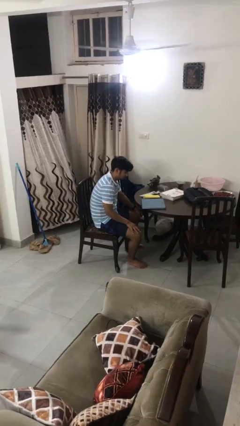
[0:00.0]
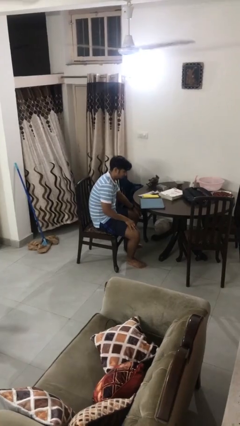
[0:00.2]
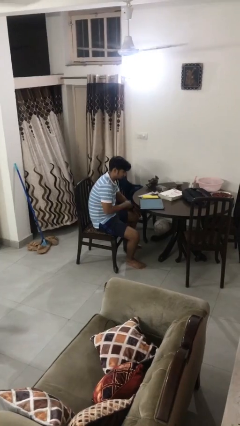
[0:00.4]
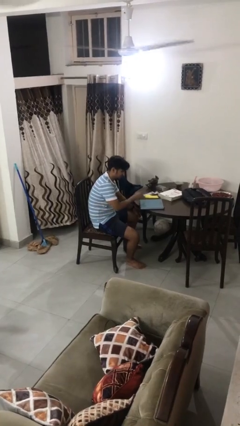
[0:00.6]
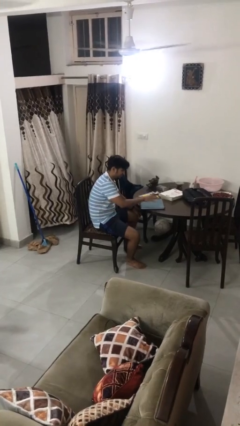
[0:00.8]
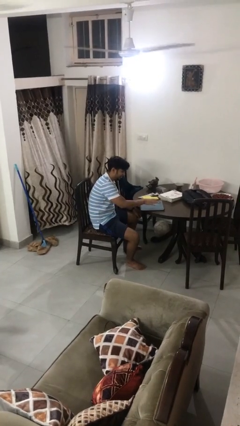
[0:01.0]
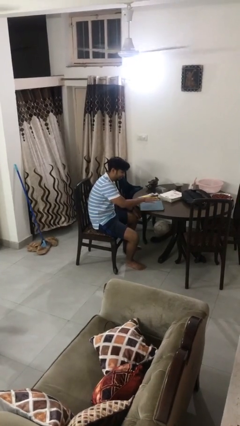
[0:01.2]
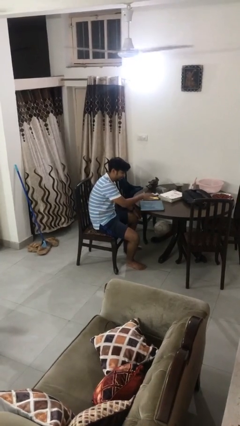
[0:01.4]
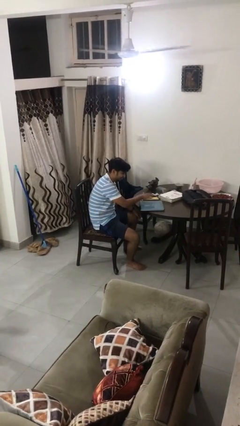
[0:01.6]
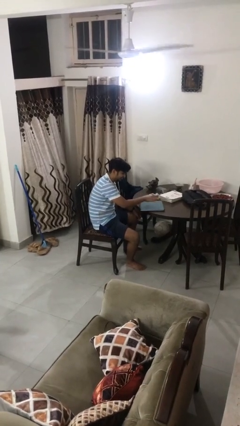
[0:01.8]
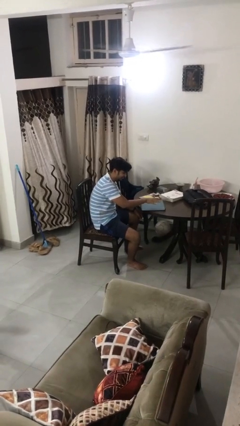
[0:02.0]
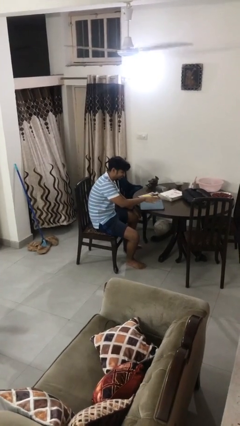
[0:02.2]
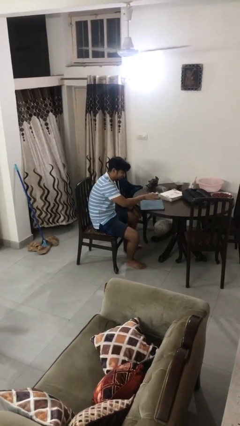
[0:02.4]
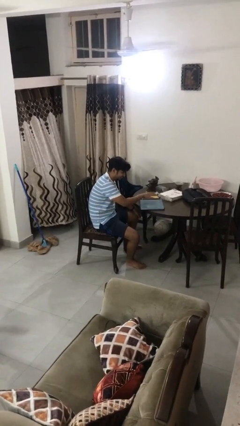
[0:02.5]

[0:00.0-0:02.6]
person waves hand over object

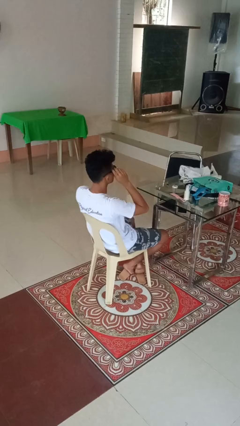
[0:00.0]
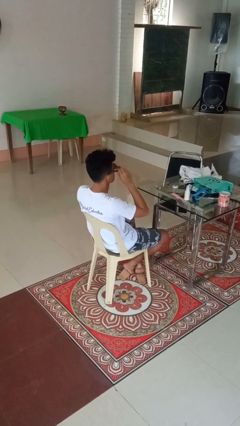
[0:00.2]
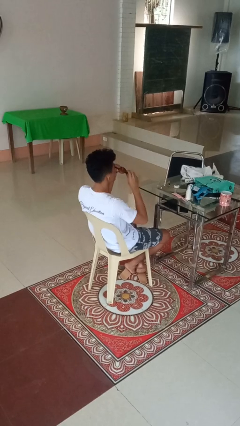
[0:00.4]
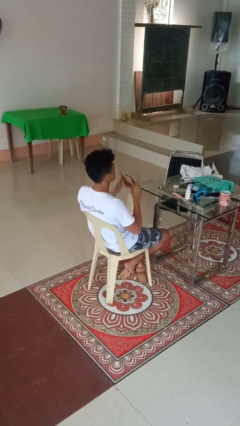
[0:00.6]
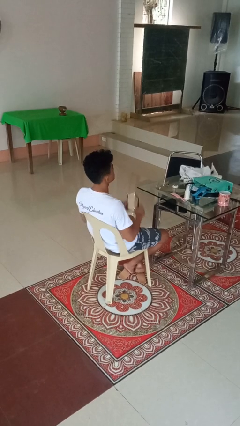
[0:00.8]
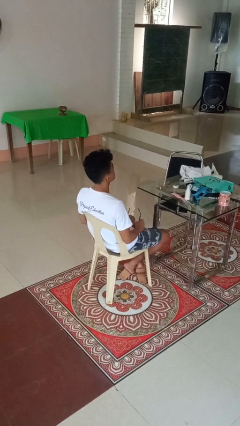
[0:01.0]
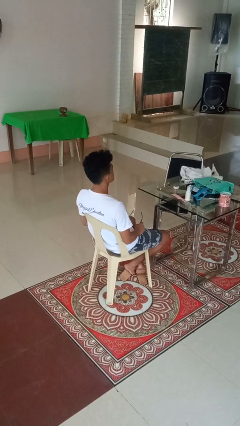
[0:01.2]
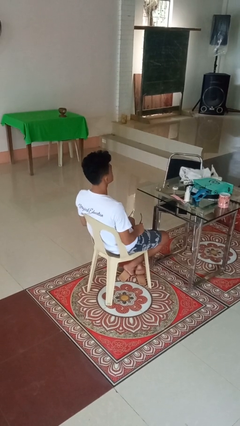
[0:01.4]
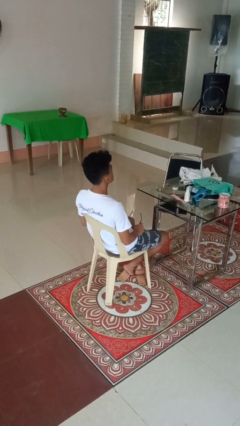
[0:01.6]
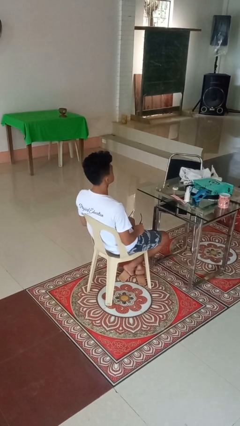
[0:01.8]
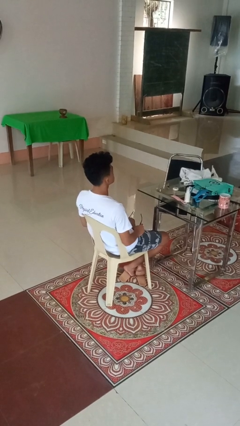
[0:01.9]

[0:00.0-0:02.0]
person takes off sunglasses

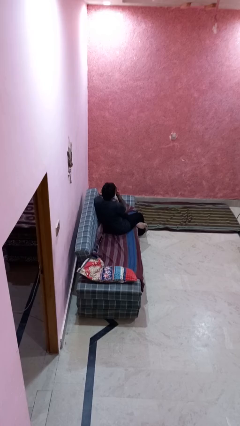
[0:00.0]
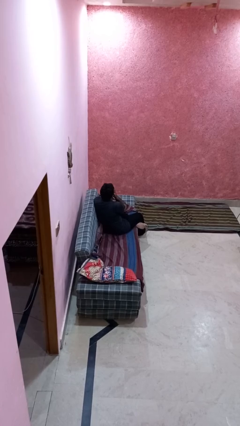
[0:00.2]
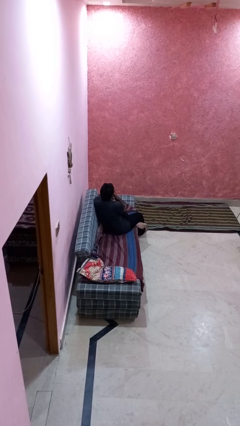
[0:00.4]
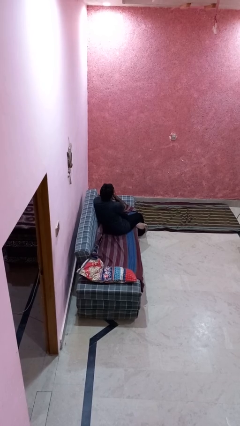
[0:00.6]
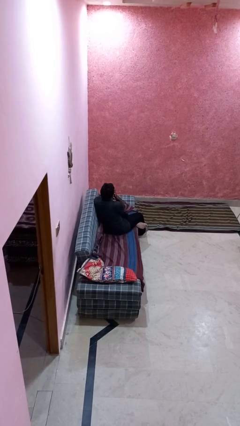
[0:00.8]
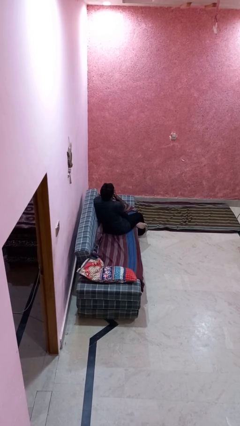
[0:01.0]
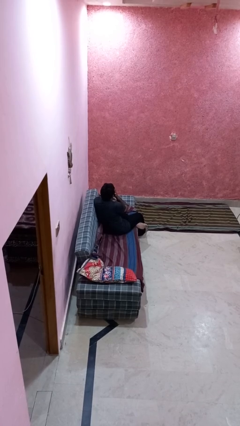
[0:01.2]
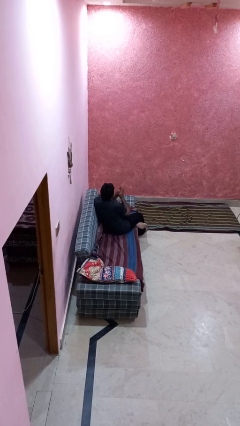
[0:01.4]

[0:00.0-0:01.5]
person covers face with hands

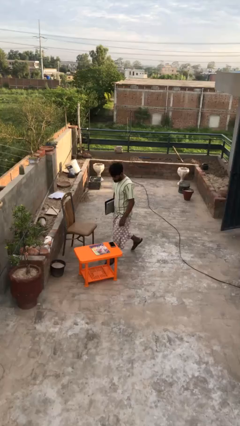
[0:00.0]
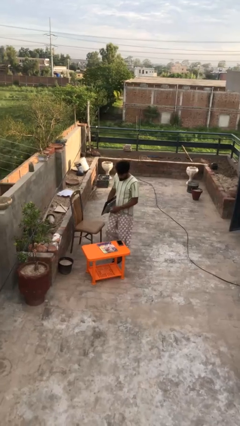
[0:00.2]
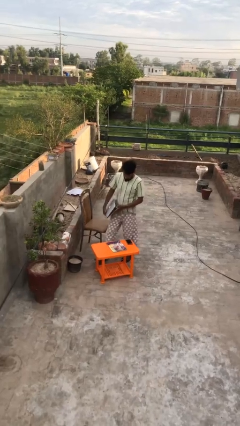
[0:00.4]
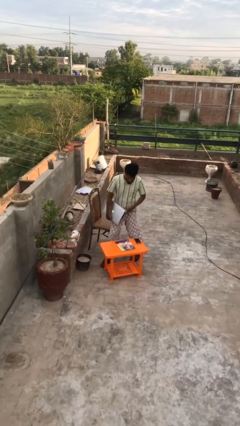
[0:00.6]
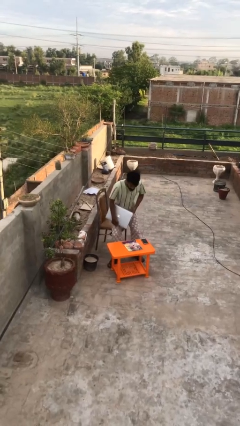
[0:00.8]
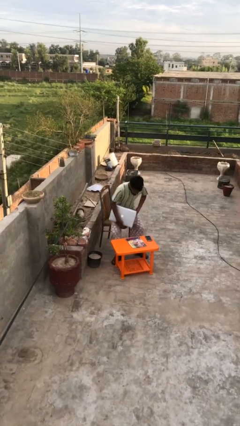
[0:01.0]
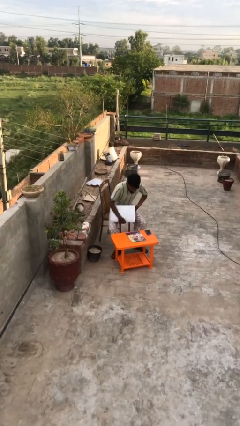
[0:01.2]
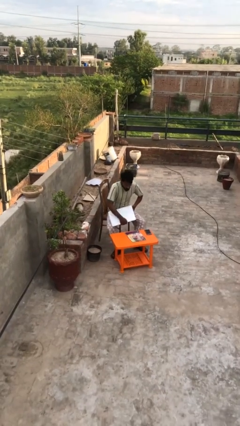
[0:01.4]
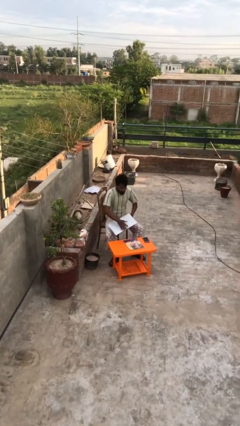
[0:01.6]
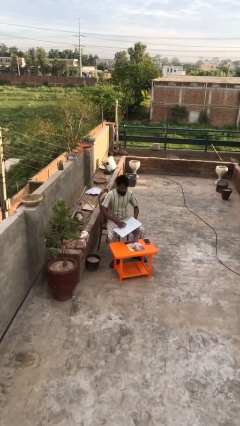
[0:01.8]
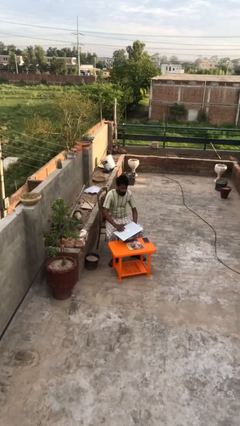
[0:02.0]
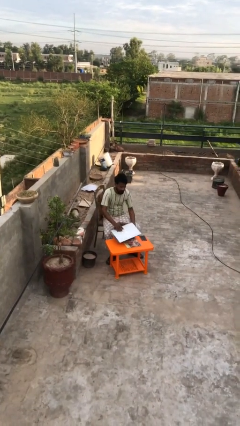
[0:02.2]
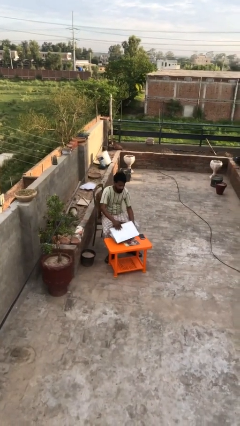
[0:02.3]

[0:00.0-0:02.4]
person sits down

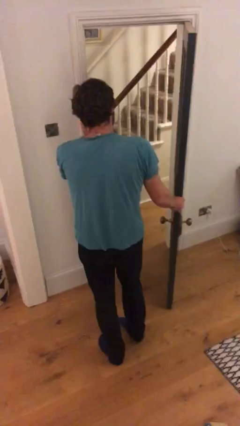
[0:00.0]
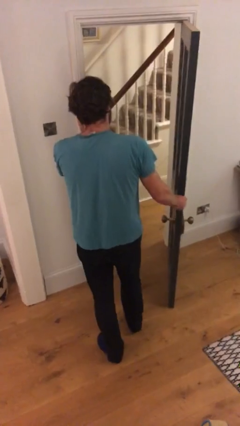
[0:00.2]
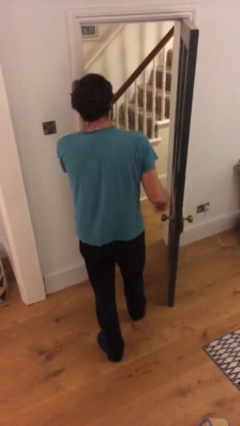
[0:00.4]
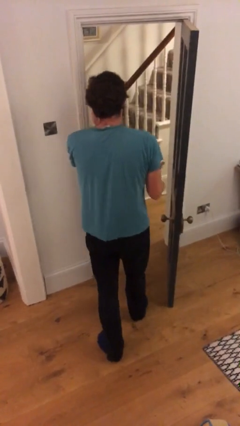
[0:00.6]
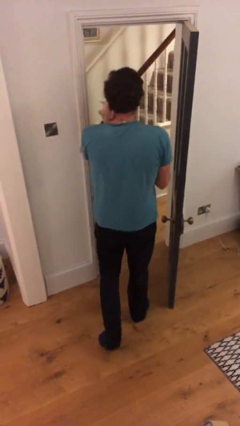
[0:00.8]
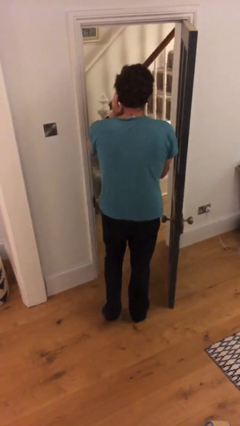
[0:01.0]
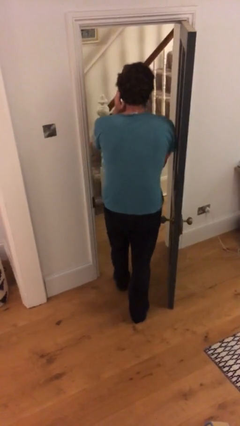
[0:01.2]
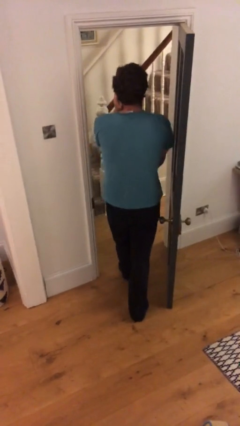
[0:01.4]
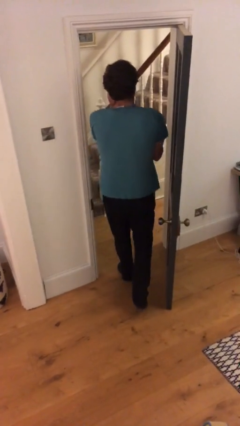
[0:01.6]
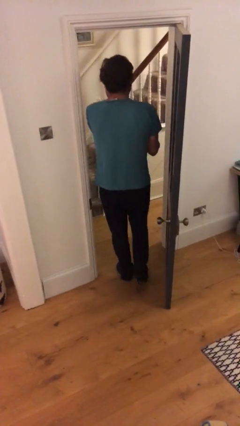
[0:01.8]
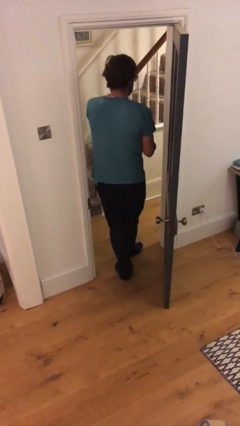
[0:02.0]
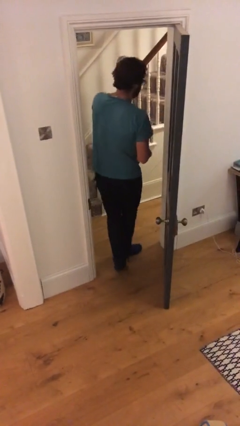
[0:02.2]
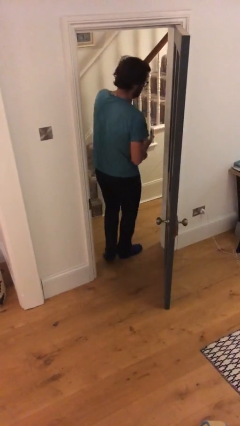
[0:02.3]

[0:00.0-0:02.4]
person exits scene through structure

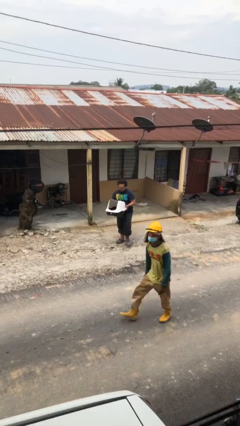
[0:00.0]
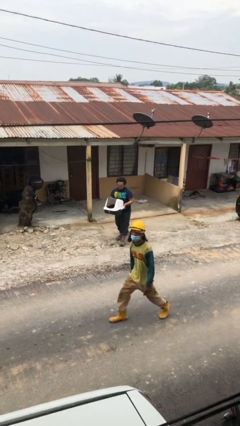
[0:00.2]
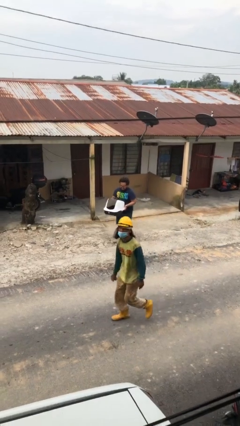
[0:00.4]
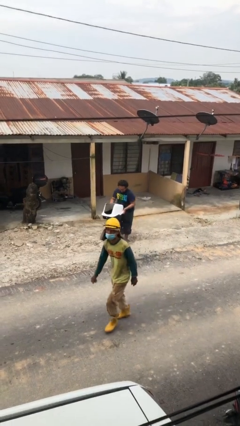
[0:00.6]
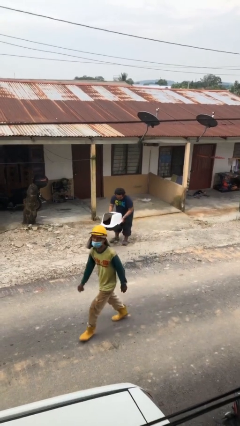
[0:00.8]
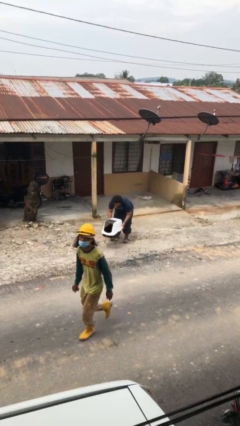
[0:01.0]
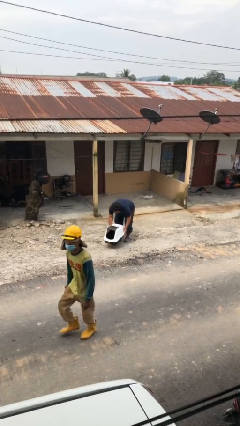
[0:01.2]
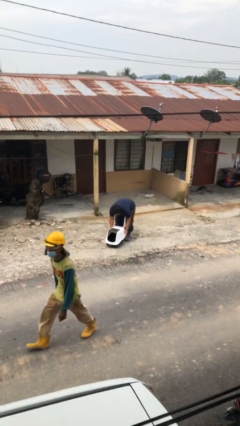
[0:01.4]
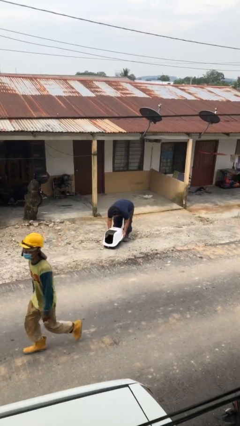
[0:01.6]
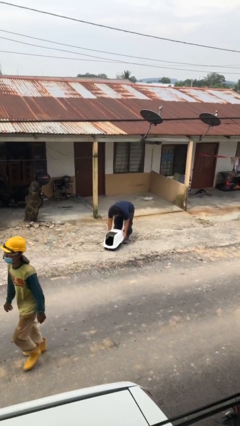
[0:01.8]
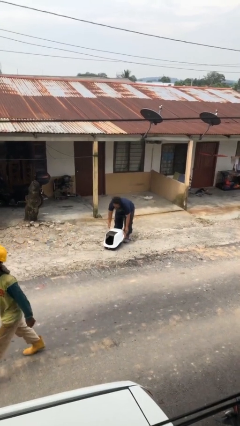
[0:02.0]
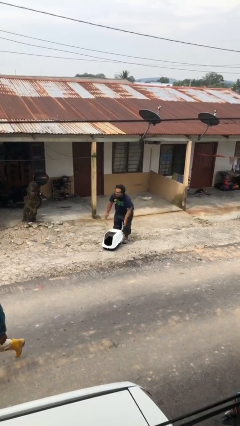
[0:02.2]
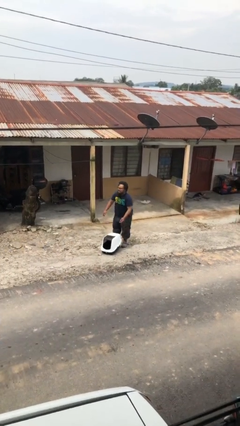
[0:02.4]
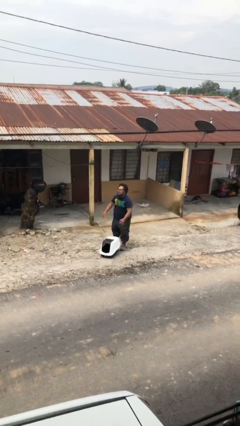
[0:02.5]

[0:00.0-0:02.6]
person puts down object on floor

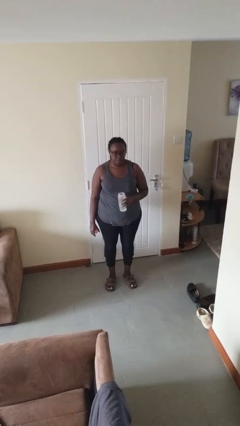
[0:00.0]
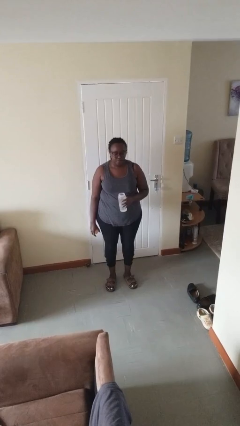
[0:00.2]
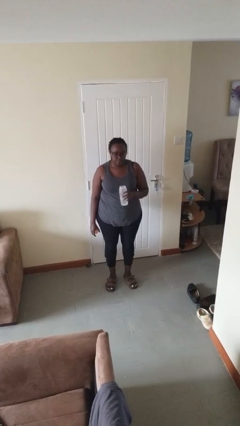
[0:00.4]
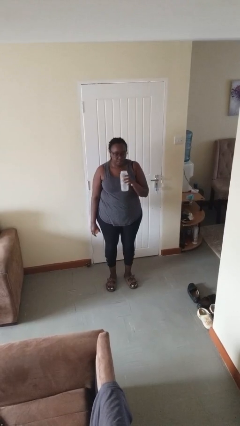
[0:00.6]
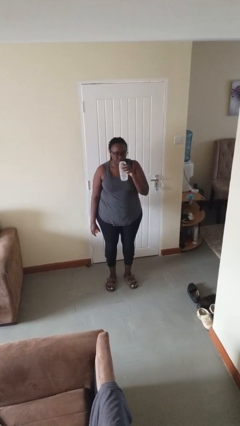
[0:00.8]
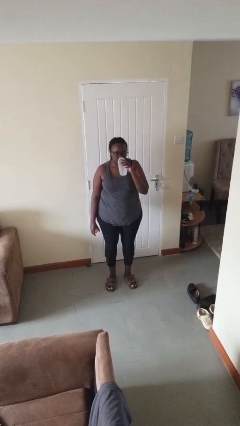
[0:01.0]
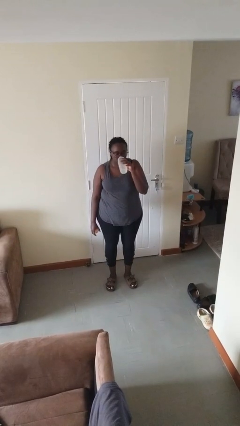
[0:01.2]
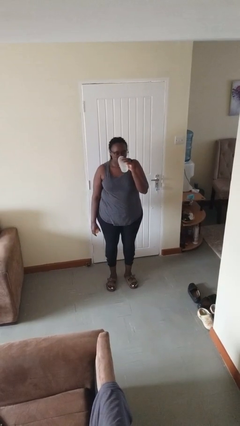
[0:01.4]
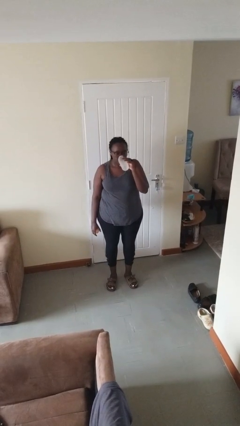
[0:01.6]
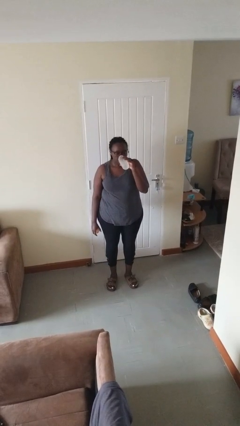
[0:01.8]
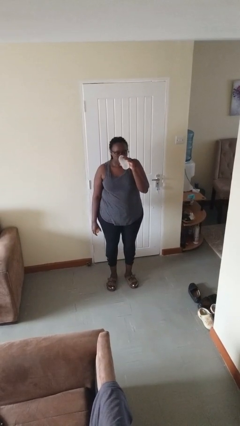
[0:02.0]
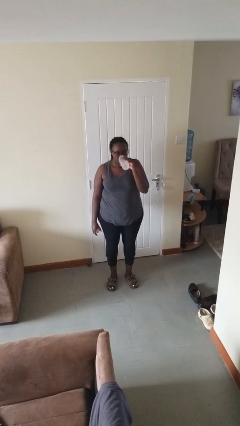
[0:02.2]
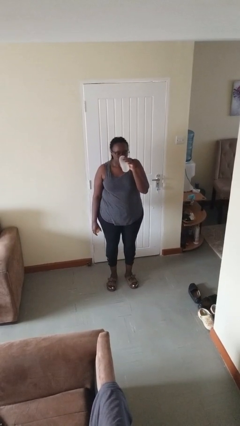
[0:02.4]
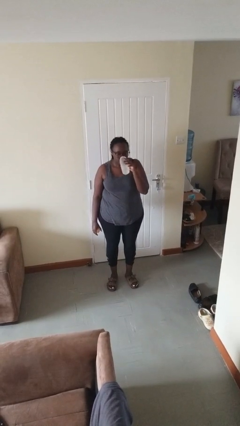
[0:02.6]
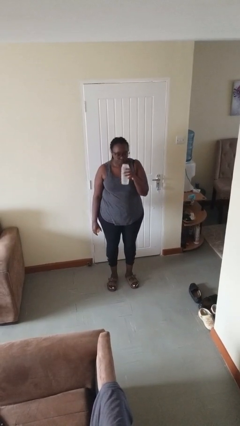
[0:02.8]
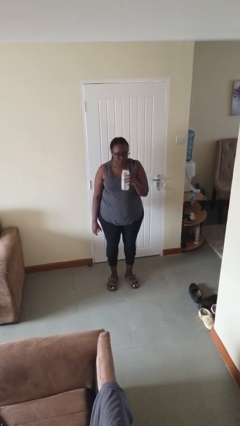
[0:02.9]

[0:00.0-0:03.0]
person drinks from bottle

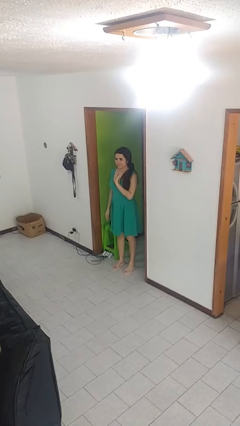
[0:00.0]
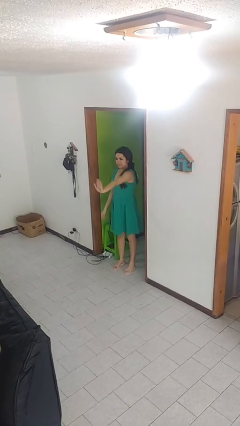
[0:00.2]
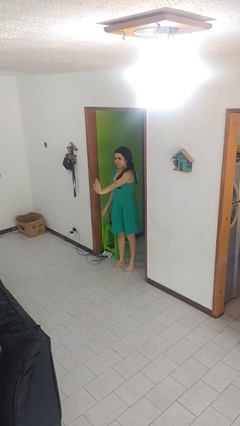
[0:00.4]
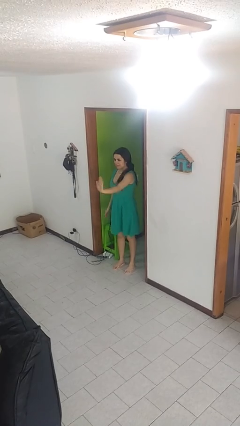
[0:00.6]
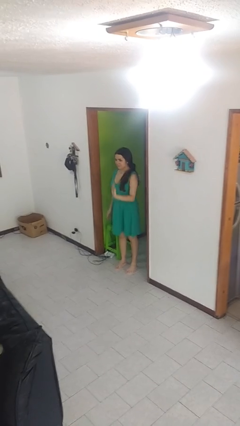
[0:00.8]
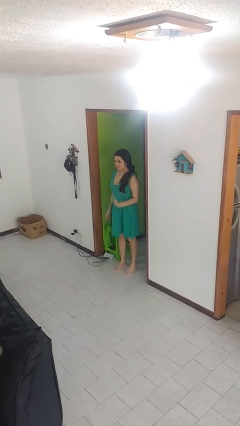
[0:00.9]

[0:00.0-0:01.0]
person gestures stop
